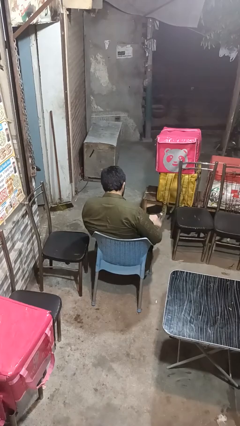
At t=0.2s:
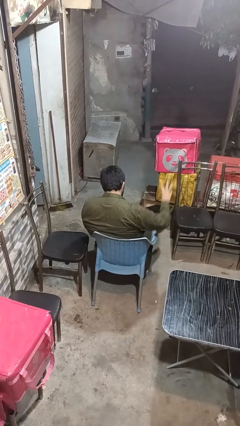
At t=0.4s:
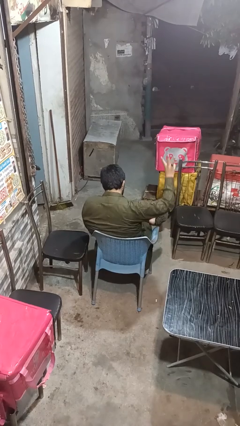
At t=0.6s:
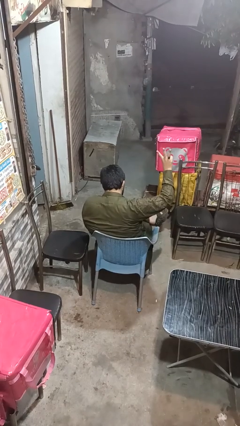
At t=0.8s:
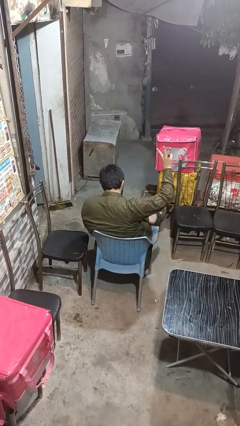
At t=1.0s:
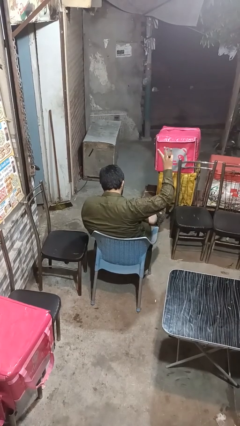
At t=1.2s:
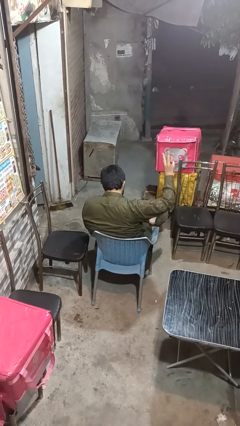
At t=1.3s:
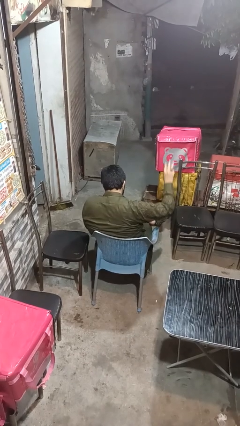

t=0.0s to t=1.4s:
person gestures number three

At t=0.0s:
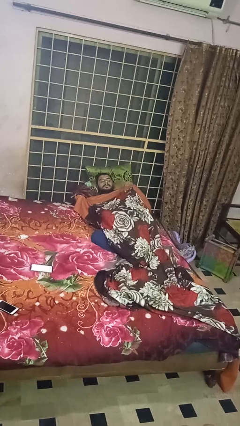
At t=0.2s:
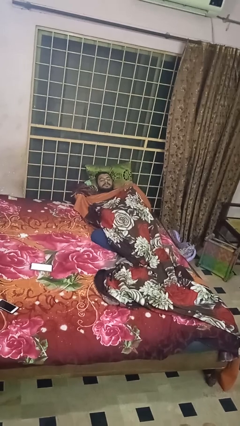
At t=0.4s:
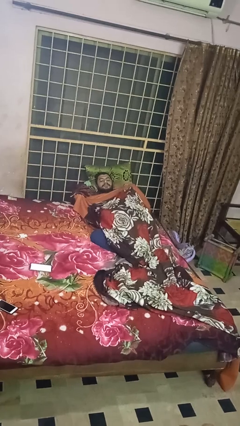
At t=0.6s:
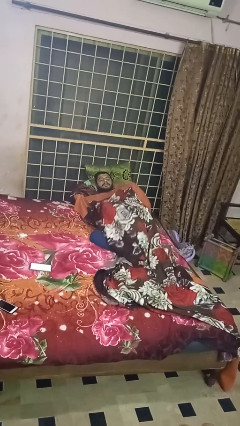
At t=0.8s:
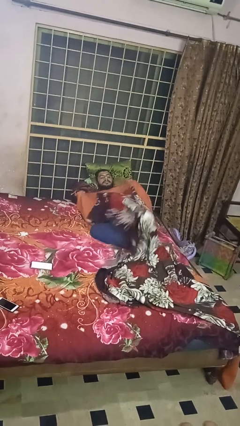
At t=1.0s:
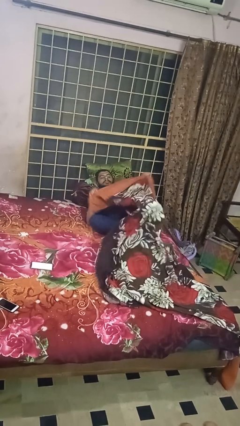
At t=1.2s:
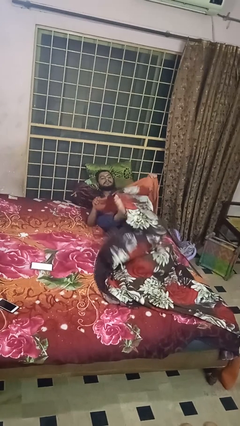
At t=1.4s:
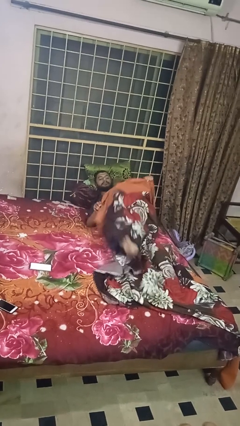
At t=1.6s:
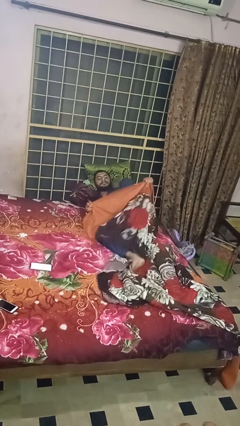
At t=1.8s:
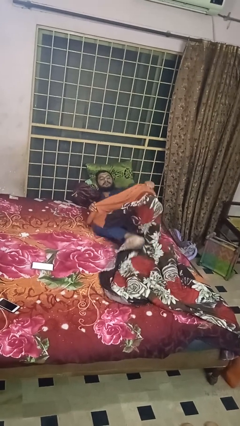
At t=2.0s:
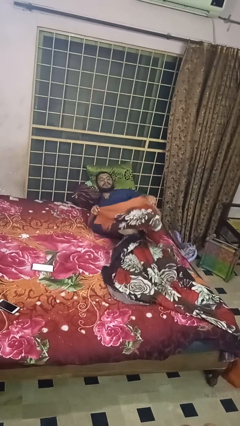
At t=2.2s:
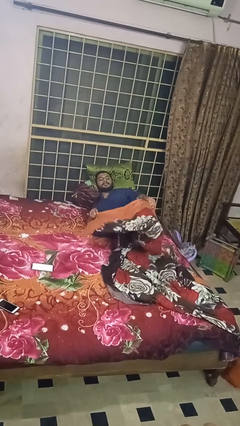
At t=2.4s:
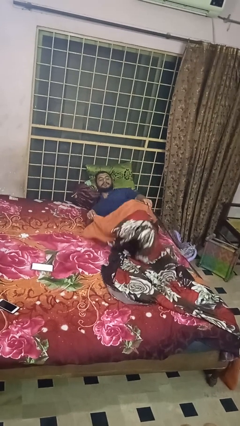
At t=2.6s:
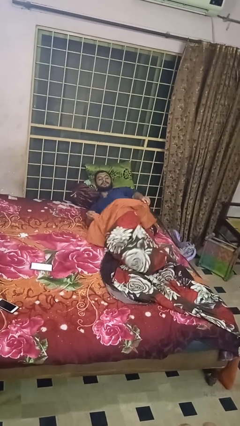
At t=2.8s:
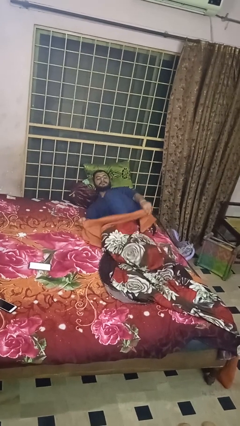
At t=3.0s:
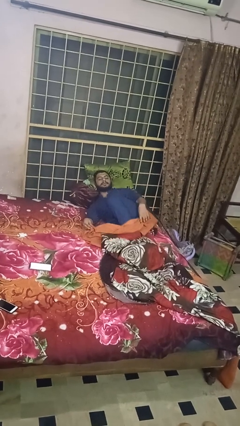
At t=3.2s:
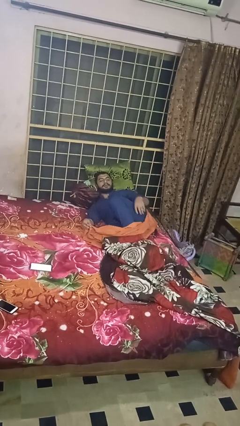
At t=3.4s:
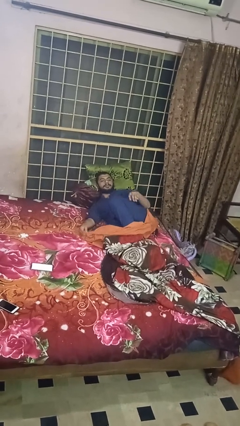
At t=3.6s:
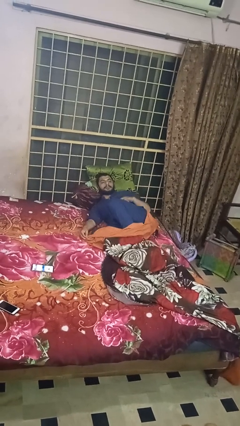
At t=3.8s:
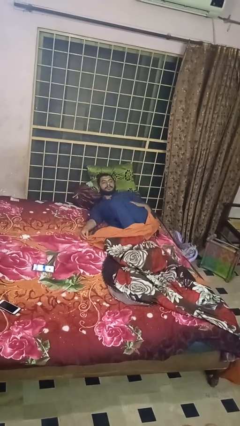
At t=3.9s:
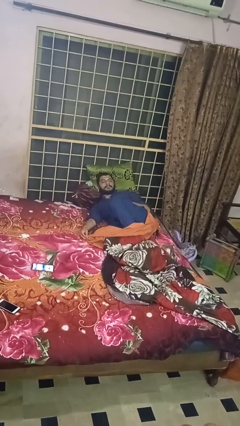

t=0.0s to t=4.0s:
person uncovers with bedsheets

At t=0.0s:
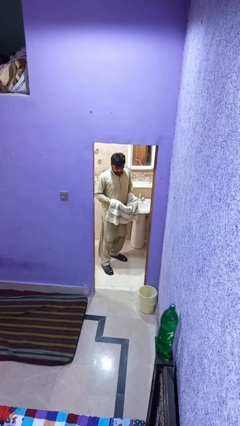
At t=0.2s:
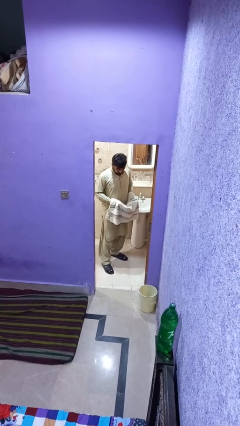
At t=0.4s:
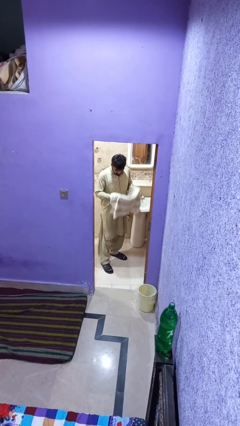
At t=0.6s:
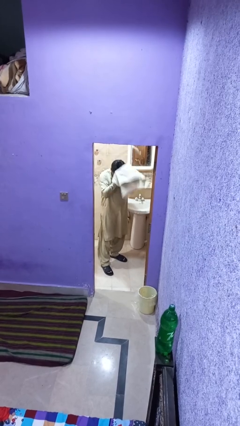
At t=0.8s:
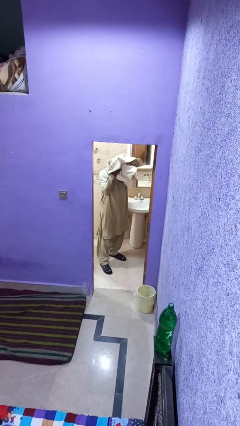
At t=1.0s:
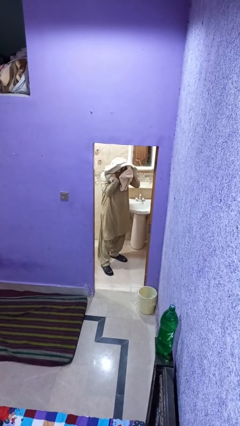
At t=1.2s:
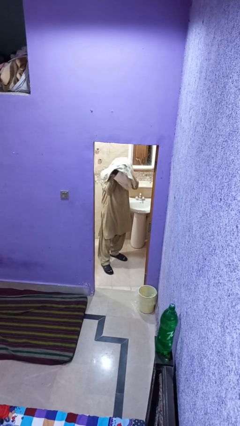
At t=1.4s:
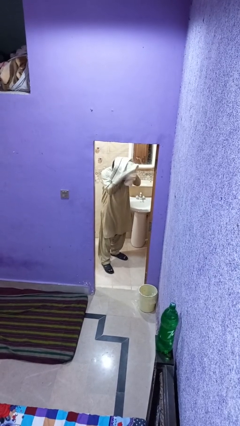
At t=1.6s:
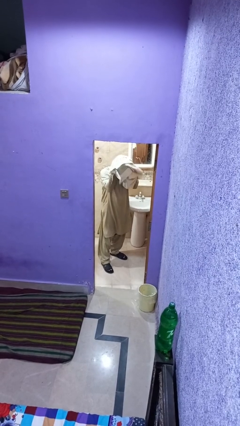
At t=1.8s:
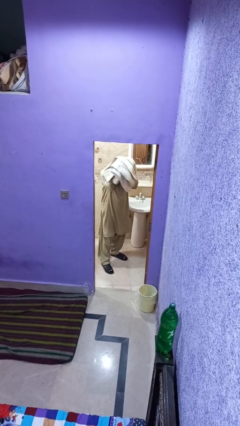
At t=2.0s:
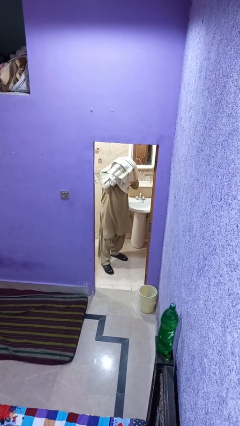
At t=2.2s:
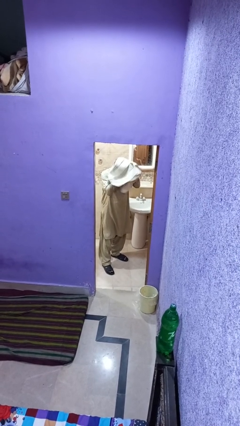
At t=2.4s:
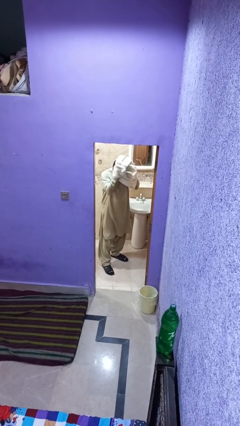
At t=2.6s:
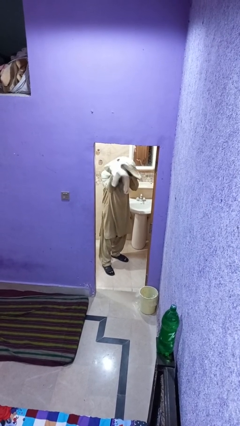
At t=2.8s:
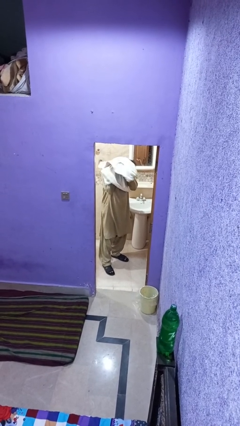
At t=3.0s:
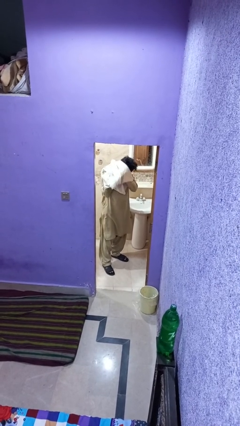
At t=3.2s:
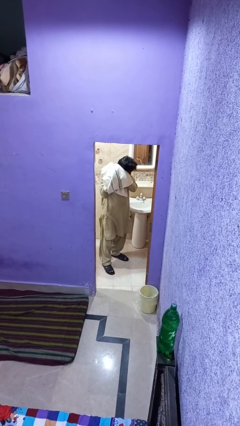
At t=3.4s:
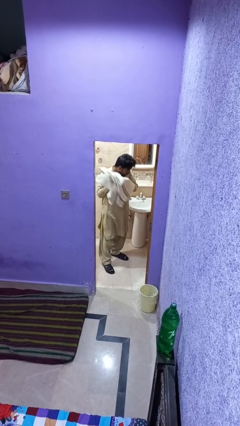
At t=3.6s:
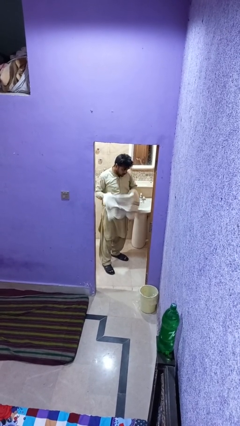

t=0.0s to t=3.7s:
person dries hair with towel

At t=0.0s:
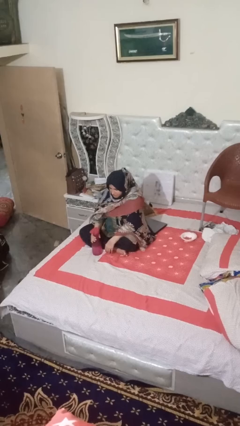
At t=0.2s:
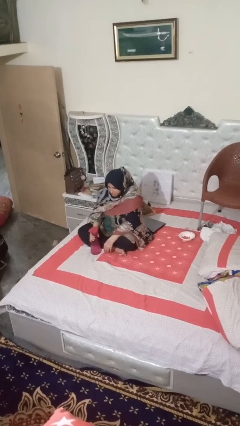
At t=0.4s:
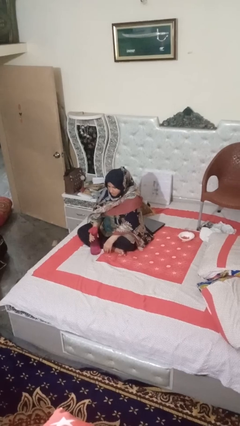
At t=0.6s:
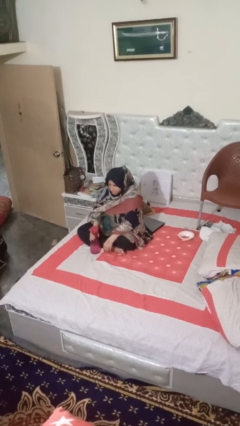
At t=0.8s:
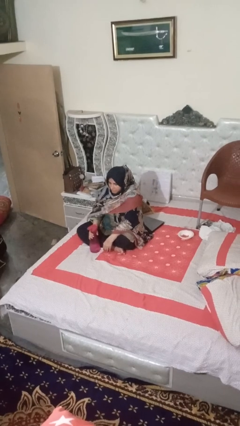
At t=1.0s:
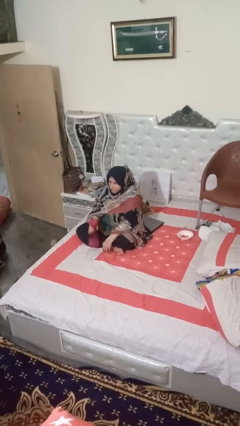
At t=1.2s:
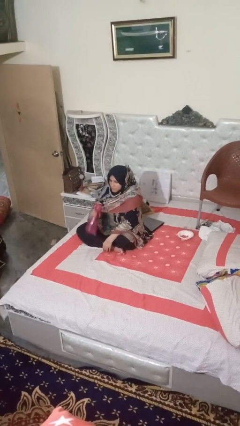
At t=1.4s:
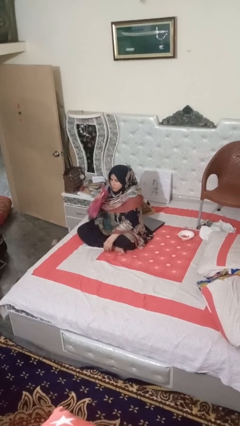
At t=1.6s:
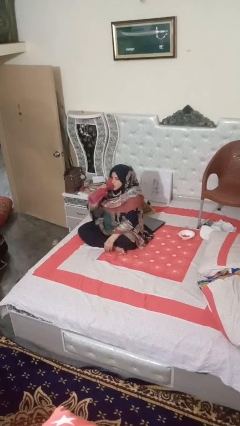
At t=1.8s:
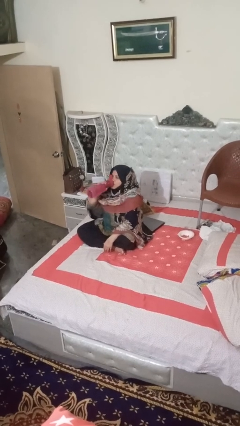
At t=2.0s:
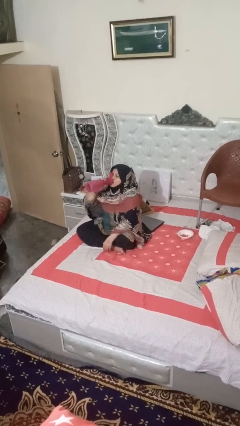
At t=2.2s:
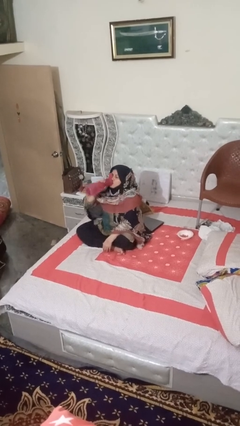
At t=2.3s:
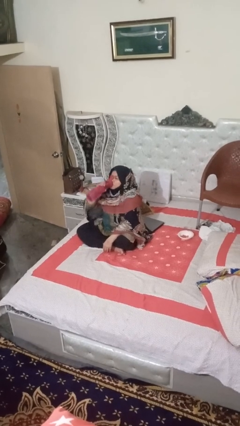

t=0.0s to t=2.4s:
person drinks from bottle

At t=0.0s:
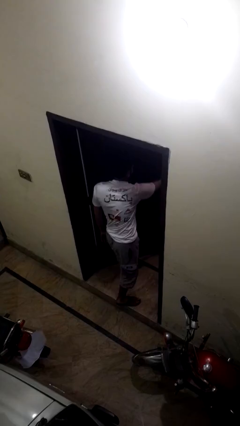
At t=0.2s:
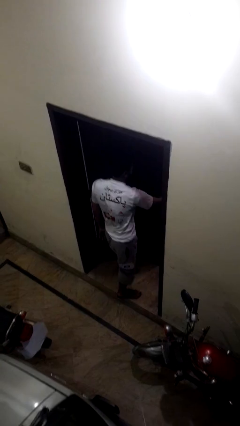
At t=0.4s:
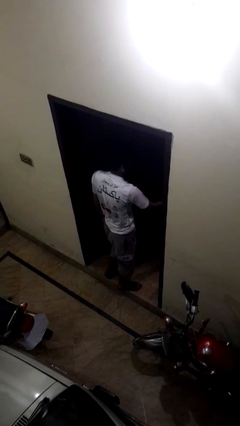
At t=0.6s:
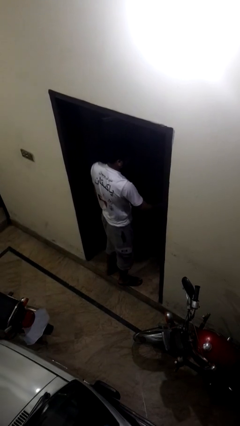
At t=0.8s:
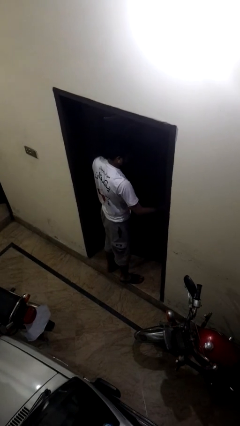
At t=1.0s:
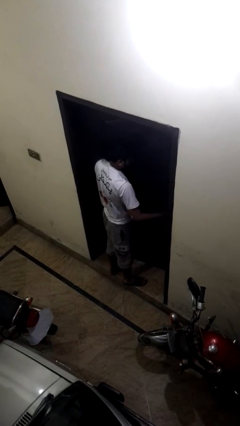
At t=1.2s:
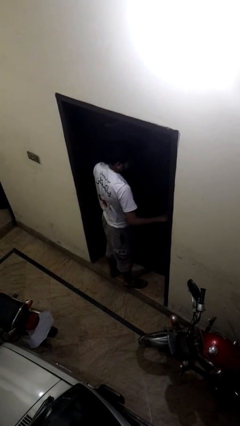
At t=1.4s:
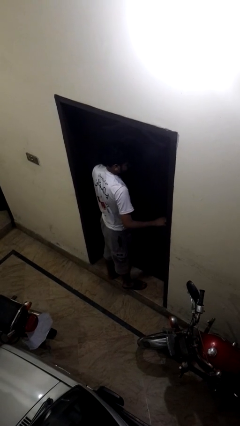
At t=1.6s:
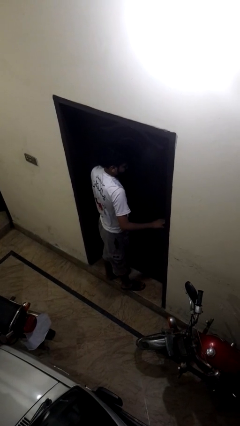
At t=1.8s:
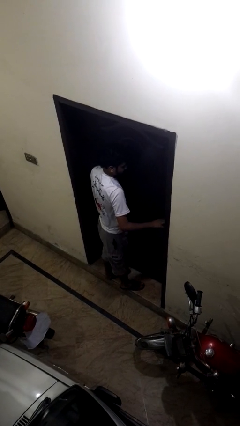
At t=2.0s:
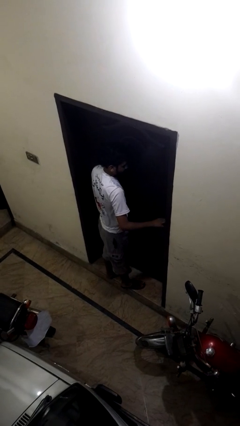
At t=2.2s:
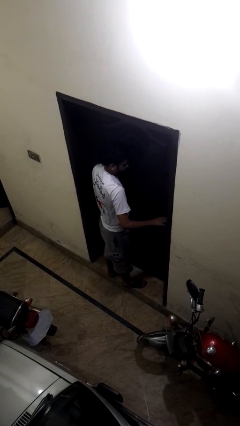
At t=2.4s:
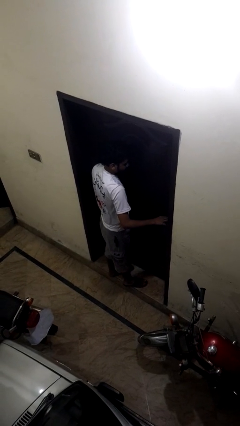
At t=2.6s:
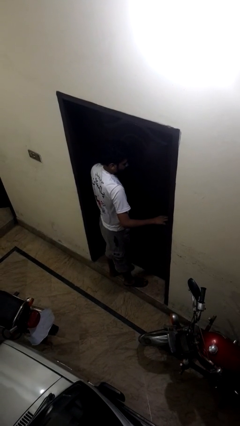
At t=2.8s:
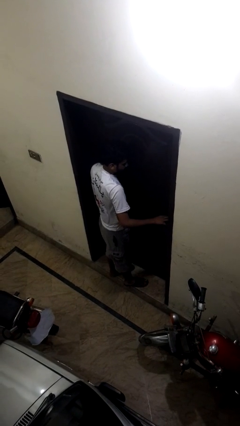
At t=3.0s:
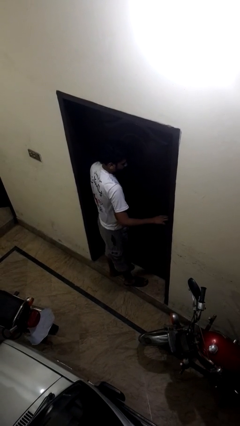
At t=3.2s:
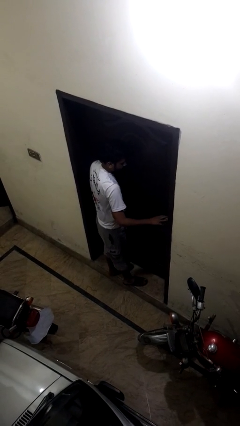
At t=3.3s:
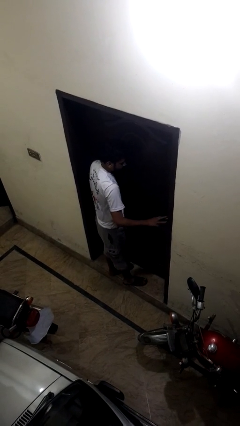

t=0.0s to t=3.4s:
person closes facility door

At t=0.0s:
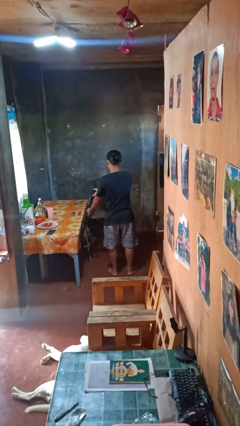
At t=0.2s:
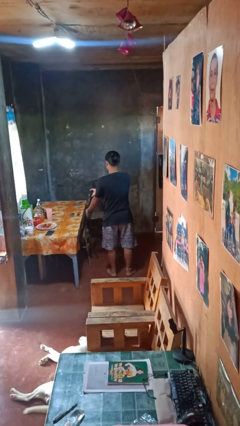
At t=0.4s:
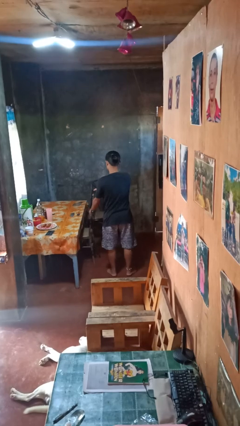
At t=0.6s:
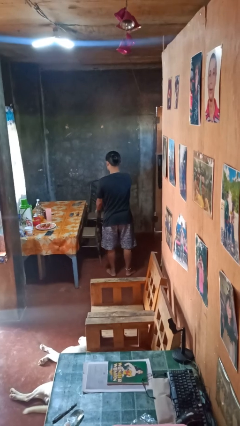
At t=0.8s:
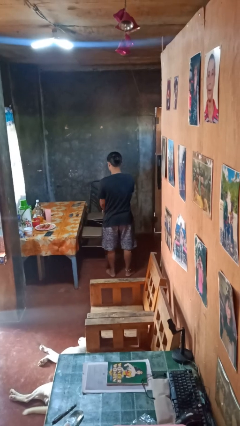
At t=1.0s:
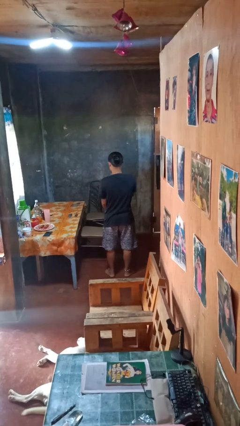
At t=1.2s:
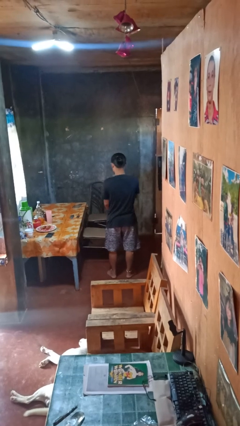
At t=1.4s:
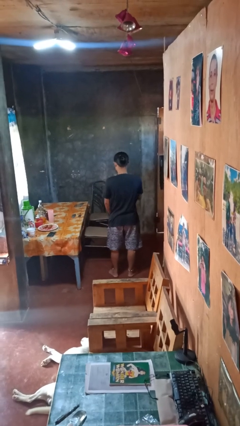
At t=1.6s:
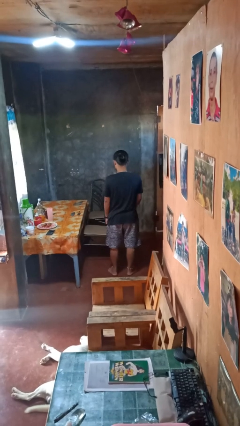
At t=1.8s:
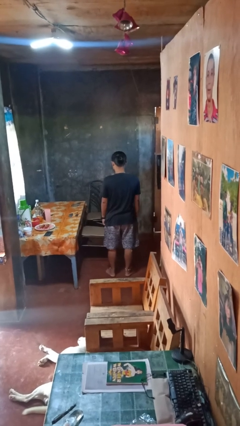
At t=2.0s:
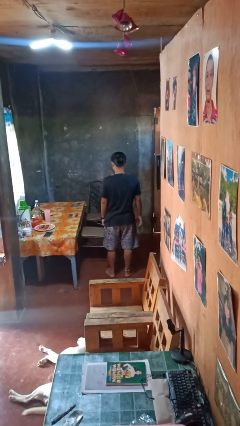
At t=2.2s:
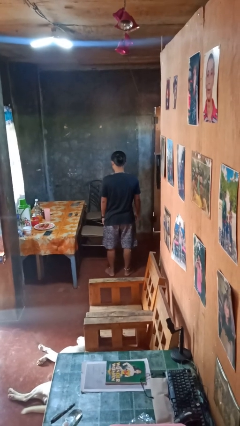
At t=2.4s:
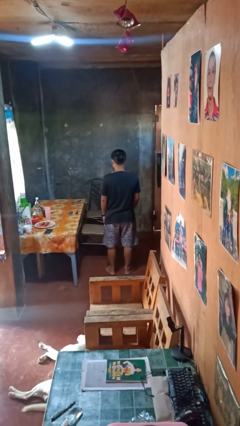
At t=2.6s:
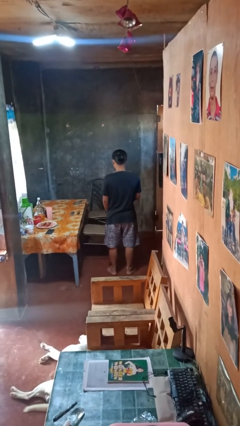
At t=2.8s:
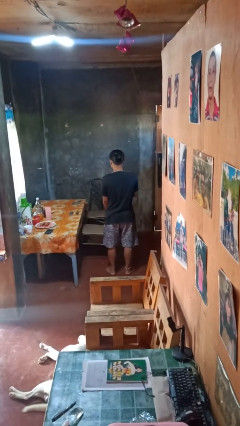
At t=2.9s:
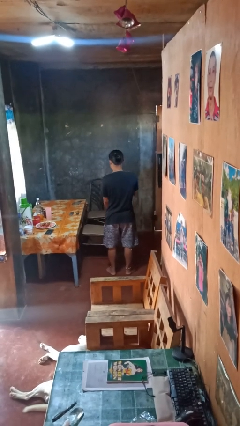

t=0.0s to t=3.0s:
person pulls out chair
